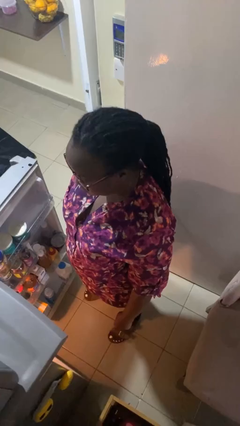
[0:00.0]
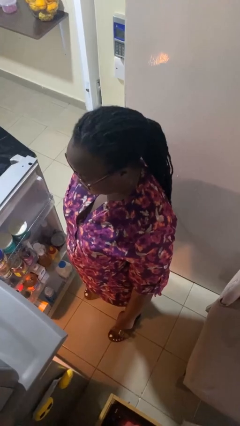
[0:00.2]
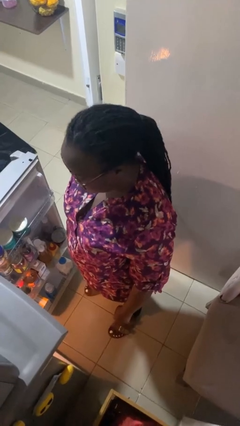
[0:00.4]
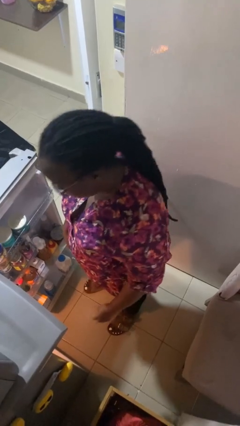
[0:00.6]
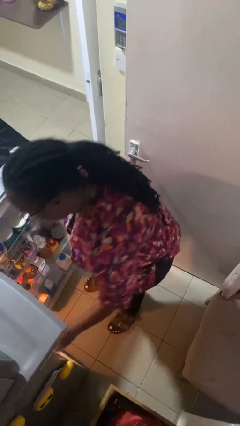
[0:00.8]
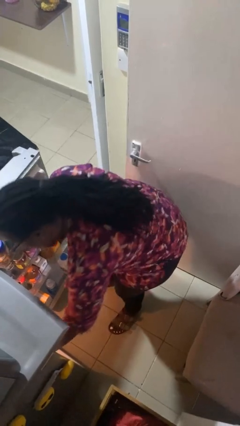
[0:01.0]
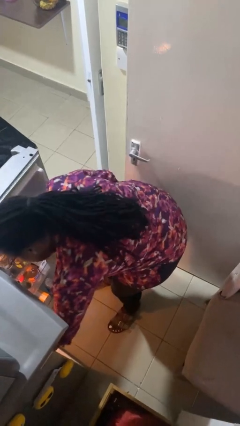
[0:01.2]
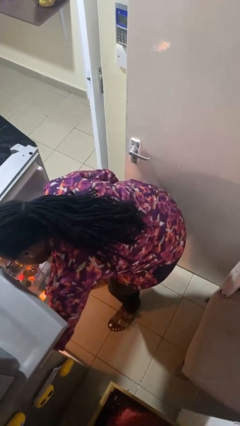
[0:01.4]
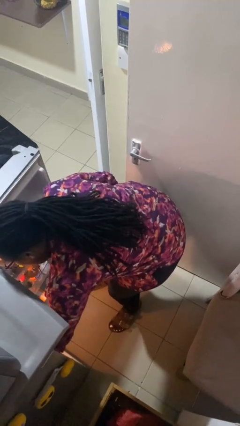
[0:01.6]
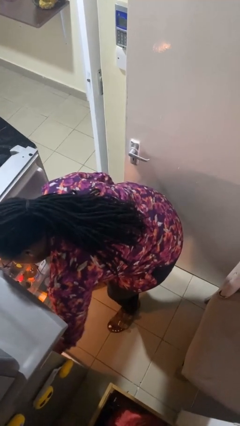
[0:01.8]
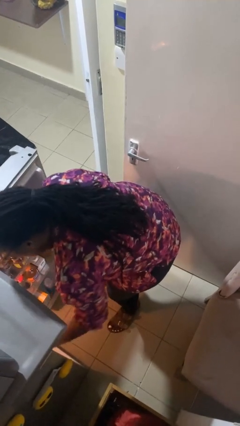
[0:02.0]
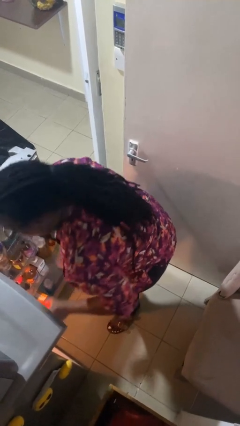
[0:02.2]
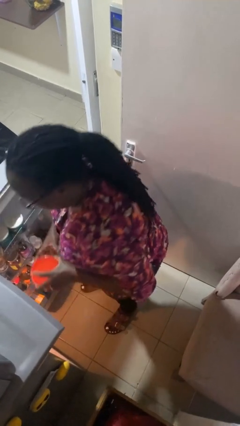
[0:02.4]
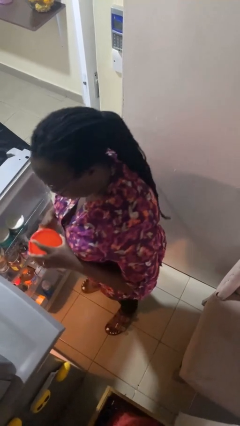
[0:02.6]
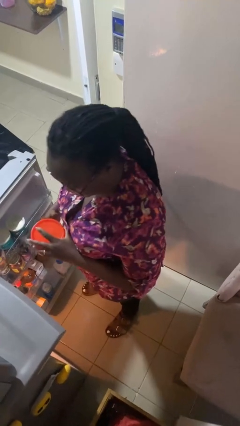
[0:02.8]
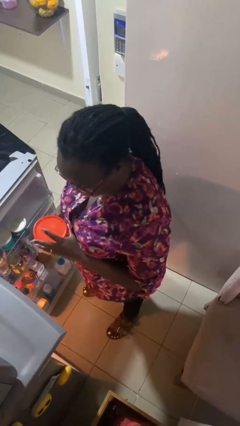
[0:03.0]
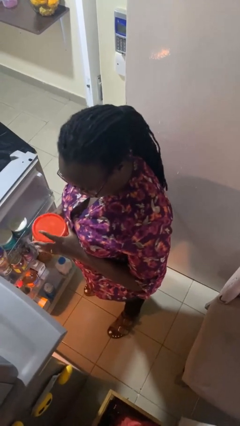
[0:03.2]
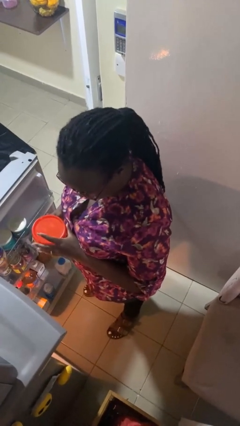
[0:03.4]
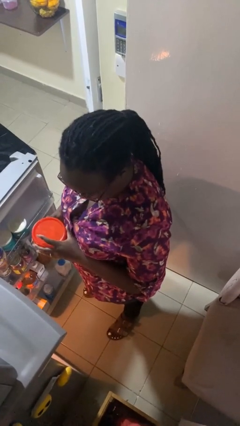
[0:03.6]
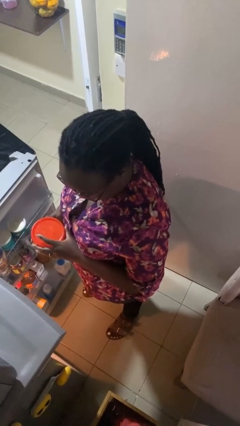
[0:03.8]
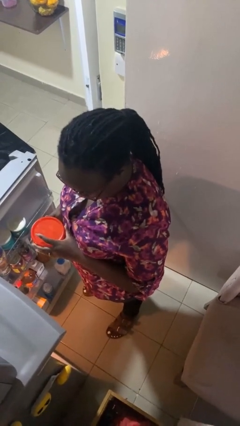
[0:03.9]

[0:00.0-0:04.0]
person takes object from refrigerator

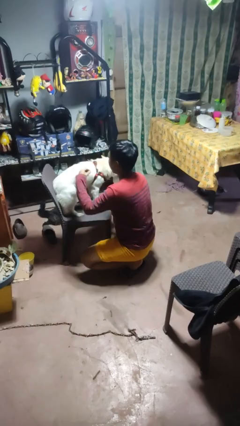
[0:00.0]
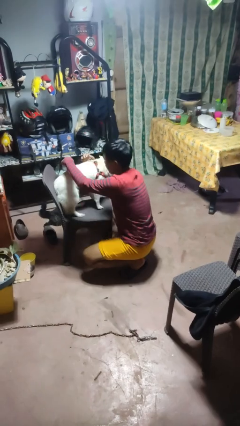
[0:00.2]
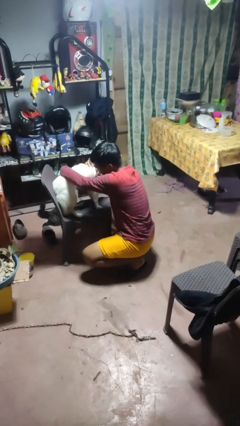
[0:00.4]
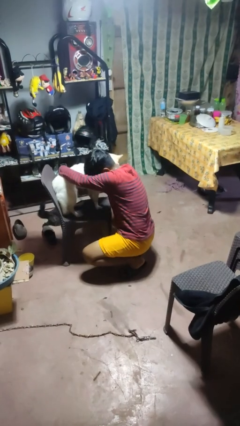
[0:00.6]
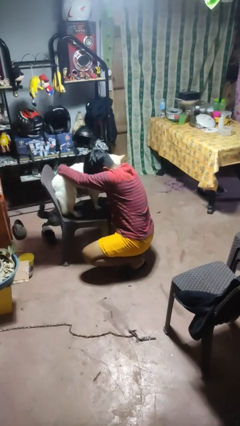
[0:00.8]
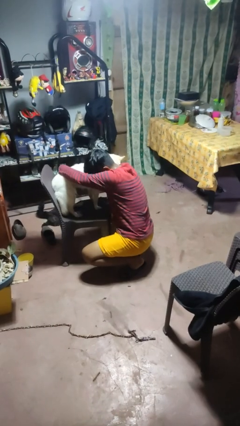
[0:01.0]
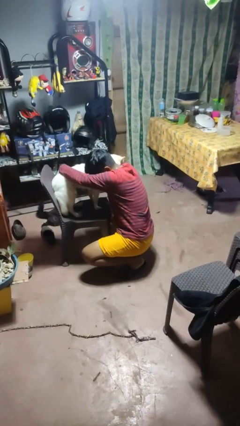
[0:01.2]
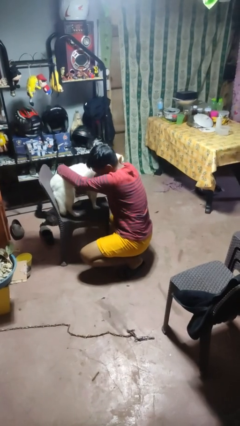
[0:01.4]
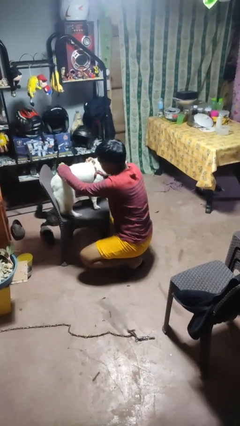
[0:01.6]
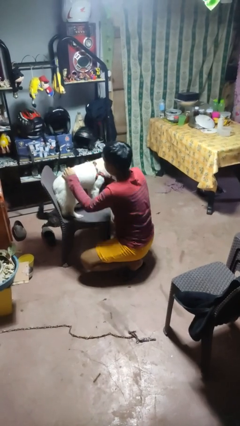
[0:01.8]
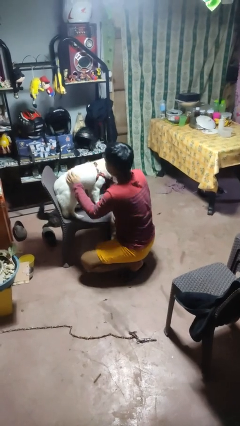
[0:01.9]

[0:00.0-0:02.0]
person hugs dog

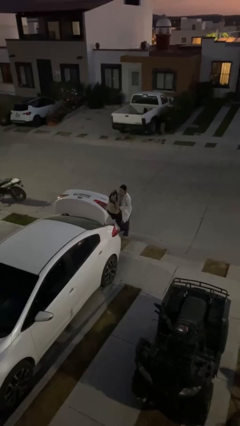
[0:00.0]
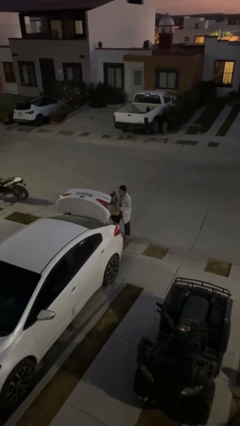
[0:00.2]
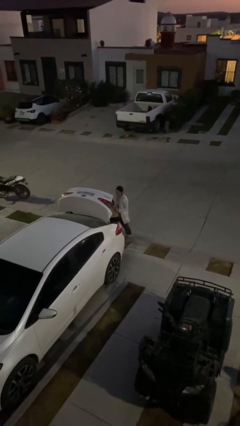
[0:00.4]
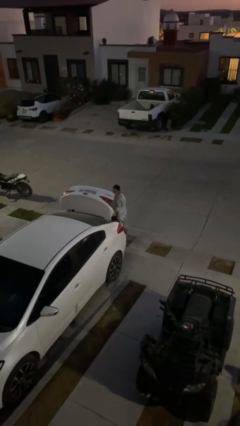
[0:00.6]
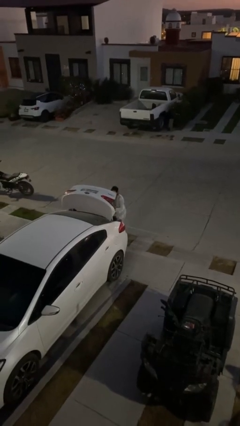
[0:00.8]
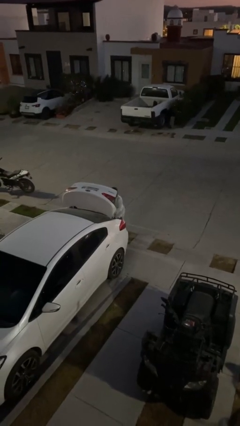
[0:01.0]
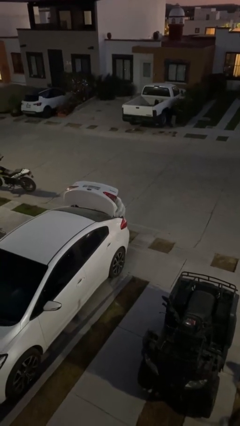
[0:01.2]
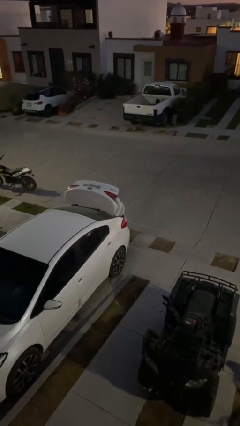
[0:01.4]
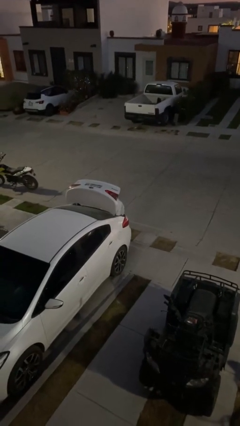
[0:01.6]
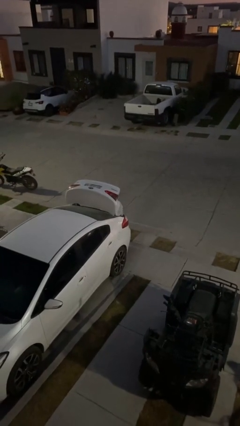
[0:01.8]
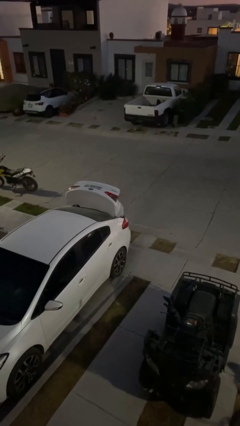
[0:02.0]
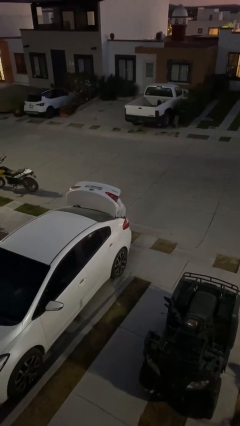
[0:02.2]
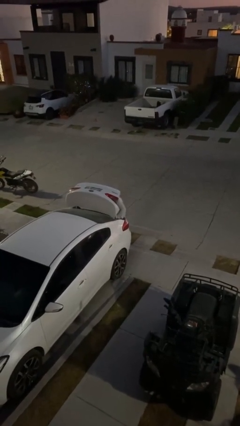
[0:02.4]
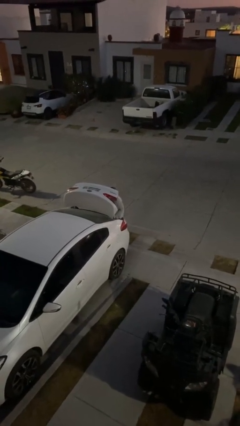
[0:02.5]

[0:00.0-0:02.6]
person loads car

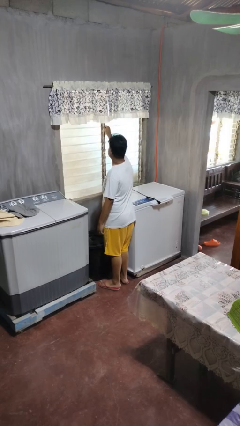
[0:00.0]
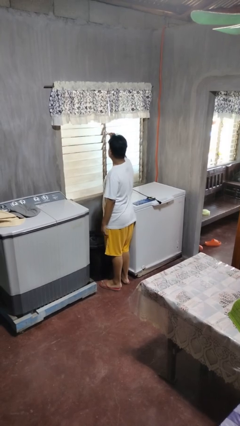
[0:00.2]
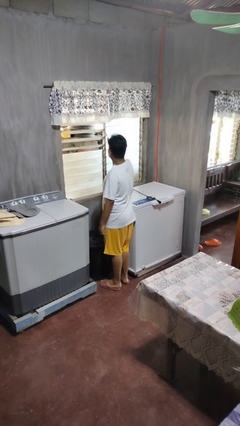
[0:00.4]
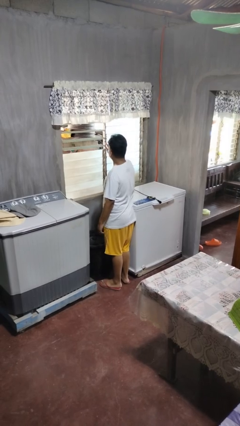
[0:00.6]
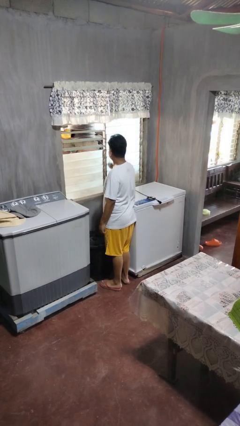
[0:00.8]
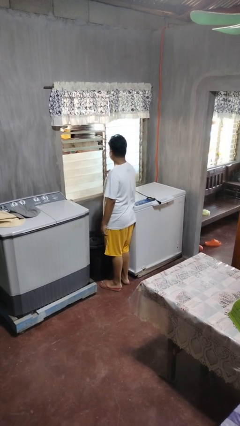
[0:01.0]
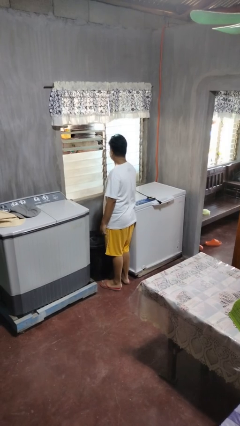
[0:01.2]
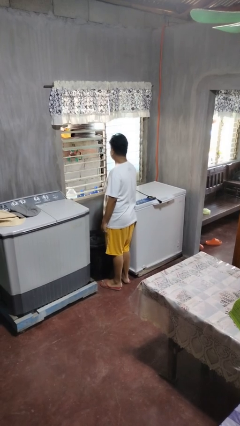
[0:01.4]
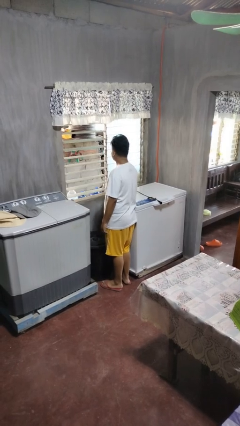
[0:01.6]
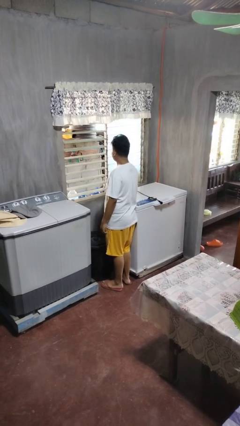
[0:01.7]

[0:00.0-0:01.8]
person opens home window

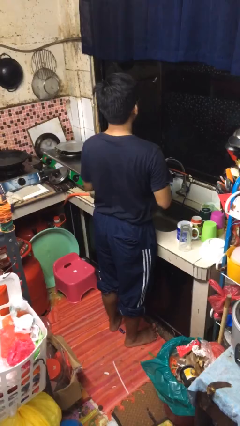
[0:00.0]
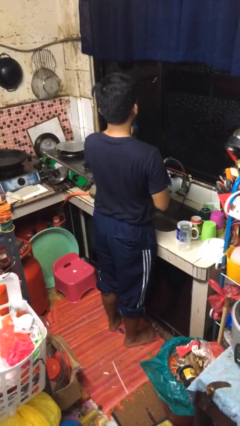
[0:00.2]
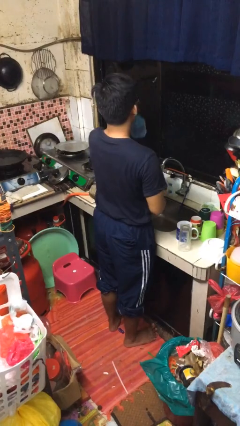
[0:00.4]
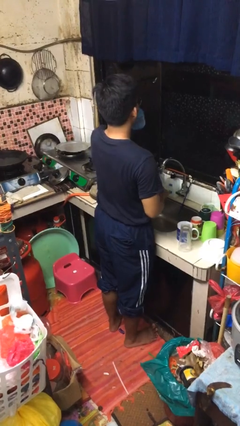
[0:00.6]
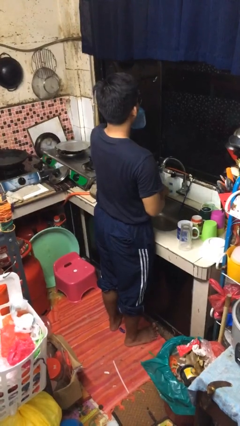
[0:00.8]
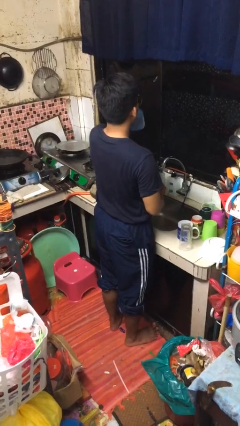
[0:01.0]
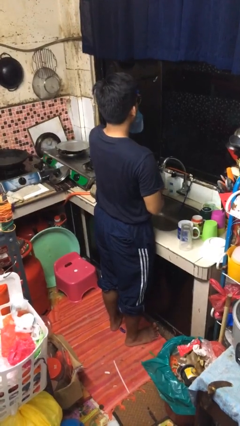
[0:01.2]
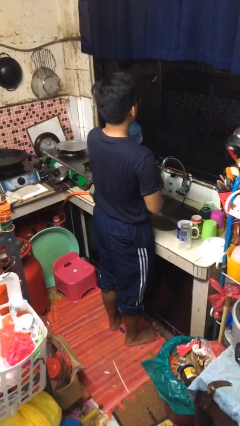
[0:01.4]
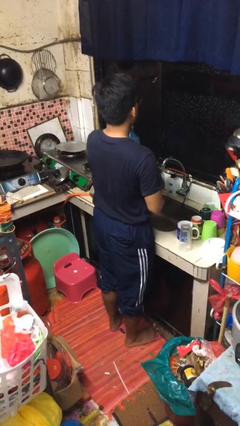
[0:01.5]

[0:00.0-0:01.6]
person sprays from bottle

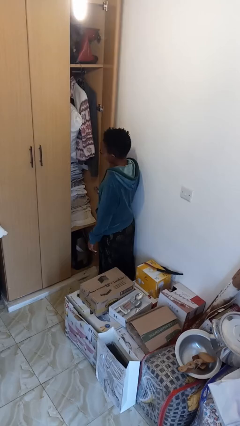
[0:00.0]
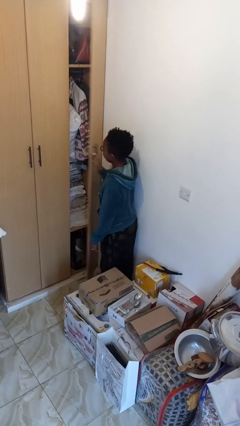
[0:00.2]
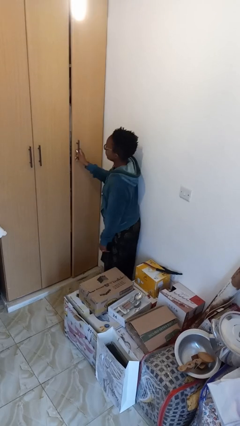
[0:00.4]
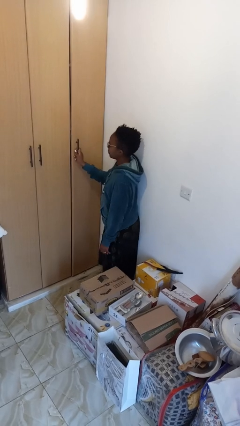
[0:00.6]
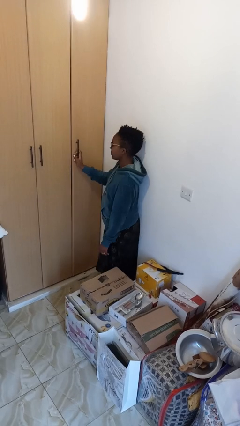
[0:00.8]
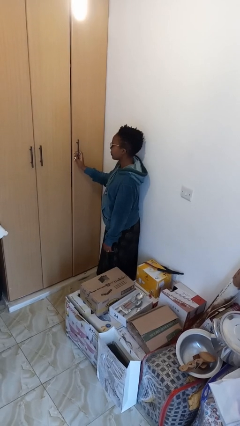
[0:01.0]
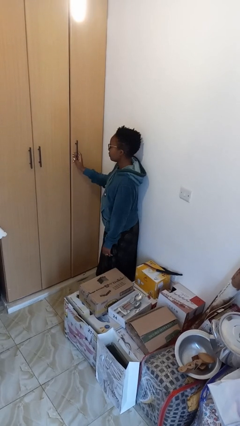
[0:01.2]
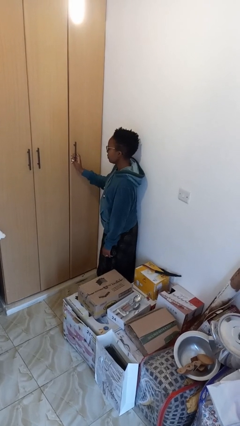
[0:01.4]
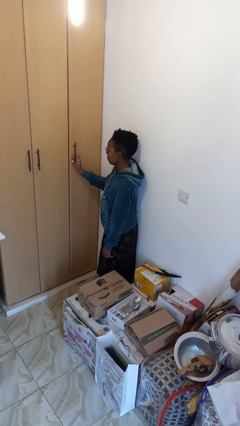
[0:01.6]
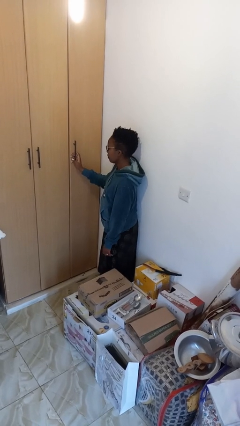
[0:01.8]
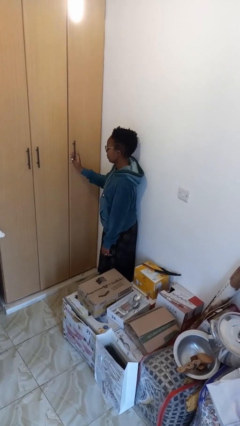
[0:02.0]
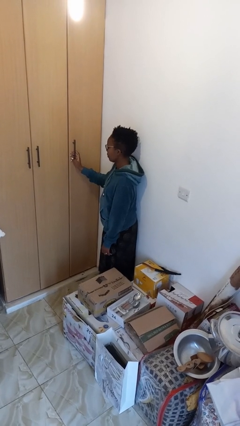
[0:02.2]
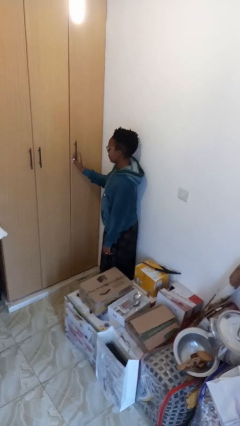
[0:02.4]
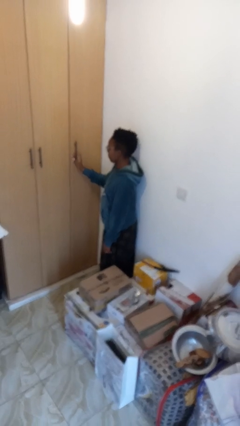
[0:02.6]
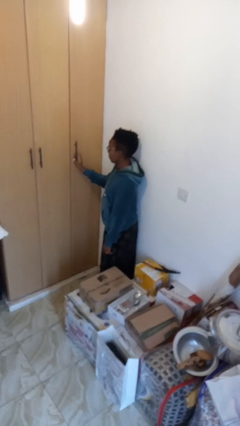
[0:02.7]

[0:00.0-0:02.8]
person closes closet door

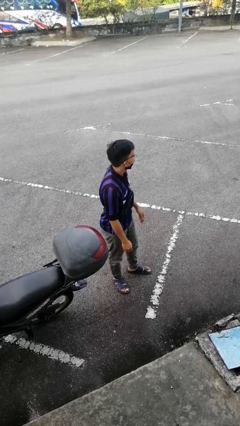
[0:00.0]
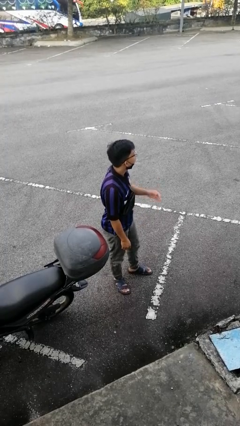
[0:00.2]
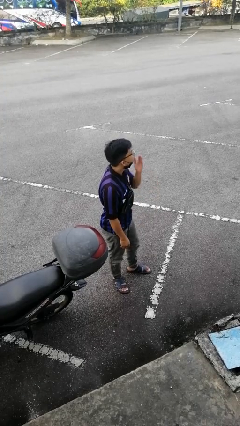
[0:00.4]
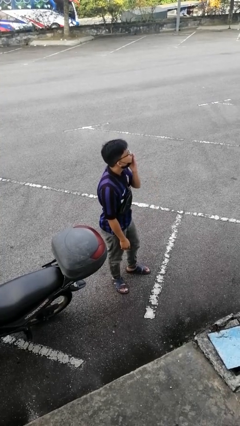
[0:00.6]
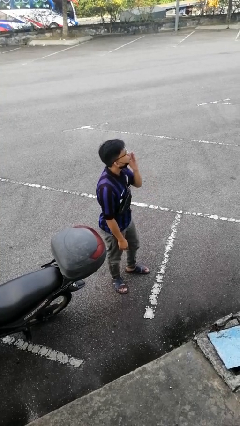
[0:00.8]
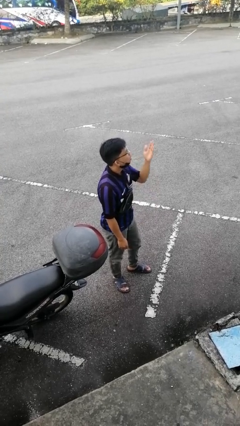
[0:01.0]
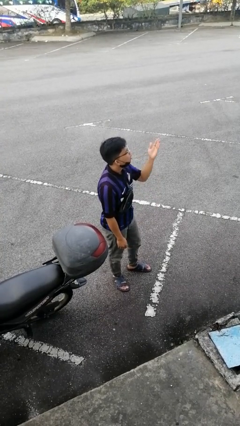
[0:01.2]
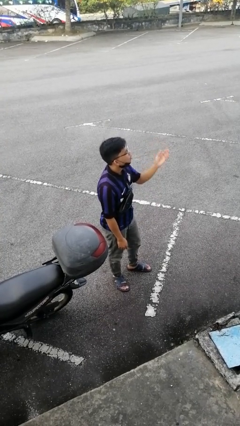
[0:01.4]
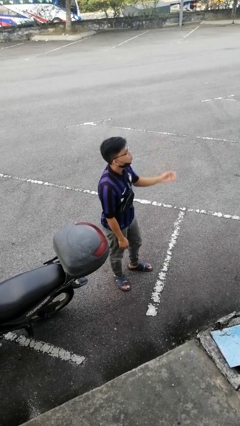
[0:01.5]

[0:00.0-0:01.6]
person gestures blow kiss
